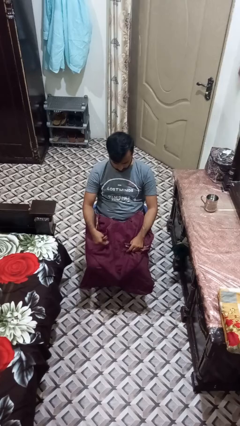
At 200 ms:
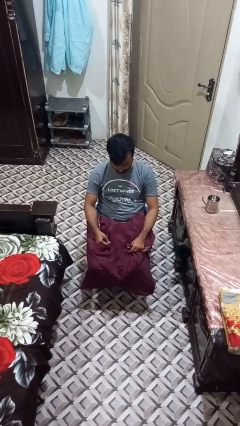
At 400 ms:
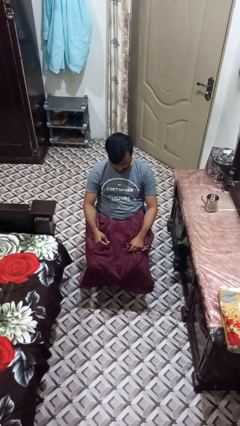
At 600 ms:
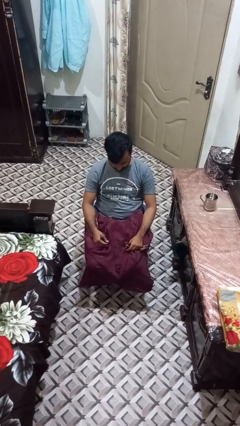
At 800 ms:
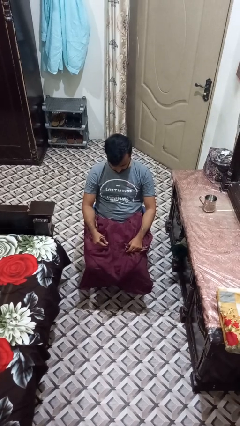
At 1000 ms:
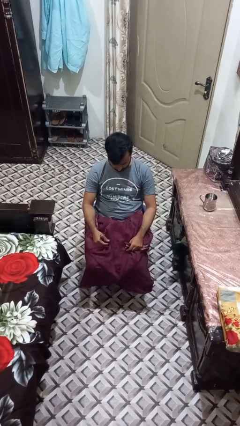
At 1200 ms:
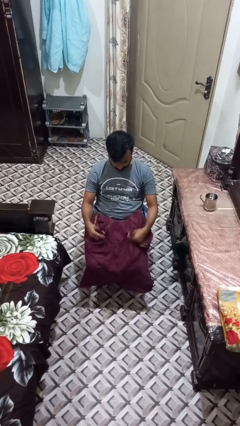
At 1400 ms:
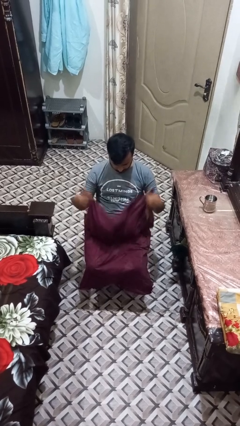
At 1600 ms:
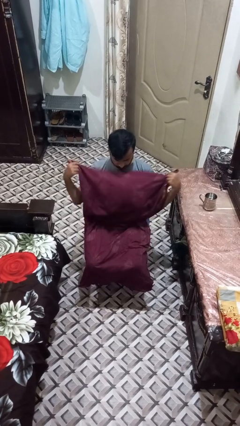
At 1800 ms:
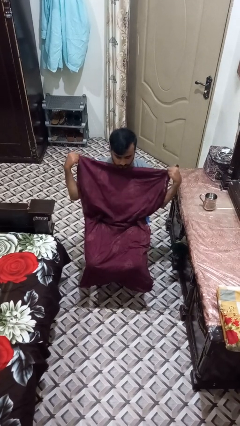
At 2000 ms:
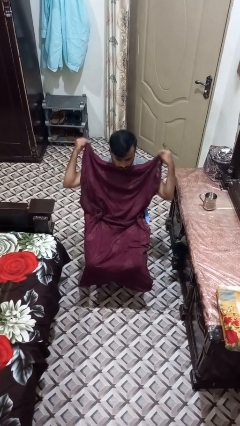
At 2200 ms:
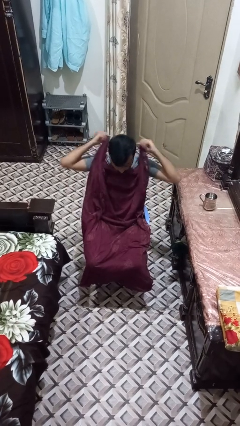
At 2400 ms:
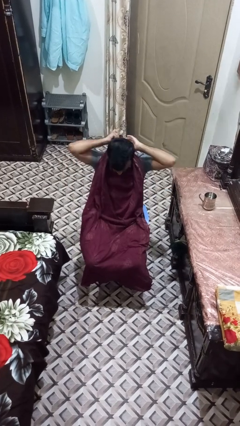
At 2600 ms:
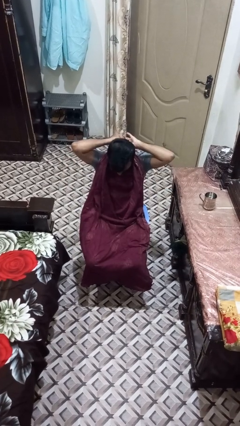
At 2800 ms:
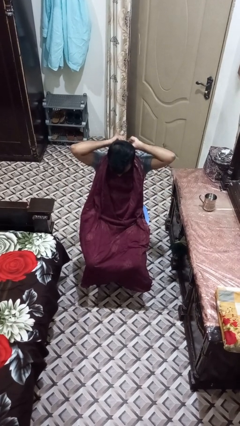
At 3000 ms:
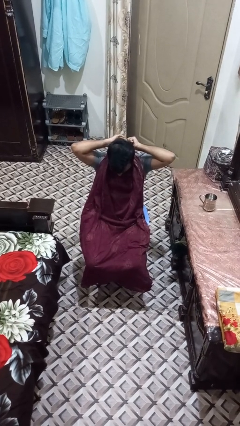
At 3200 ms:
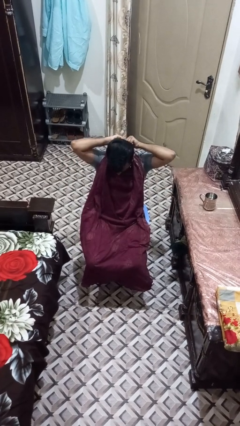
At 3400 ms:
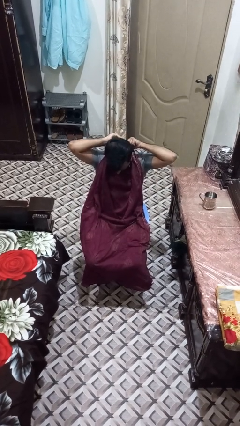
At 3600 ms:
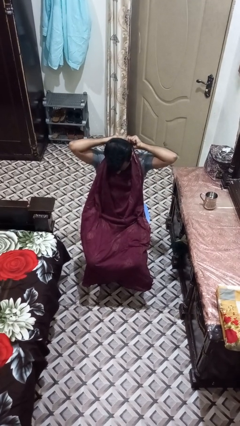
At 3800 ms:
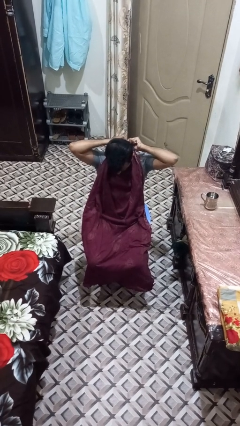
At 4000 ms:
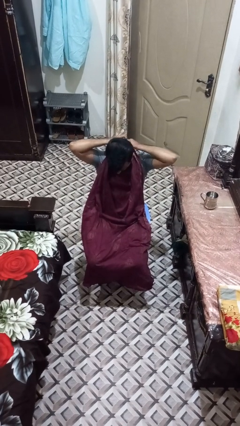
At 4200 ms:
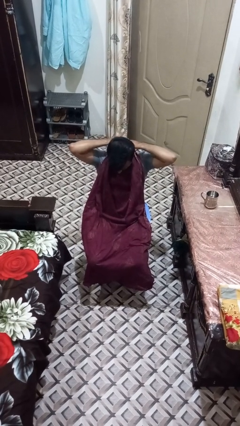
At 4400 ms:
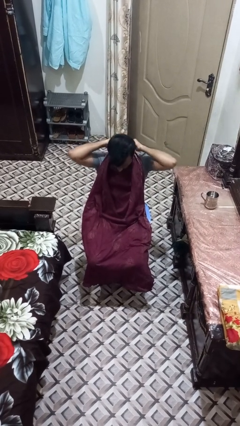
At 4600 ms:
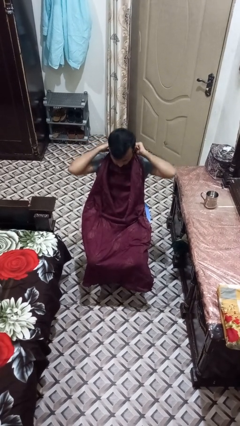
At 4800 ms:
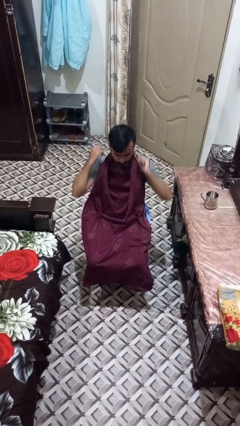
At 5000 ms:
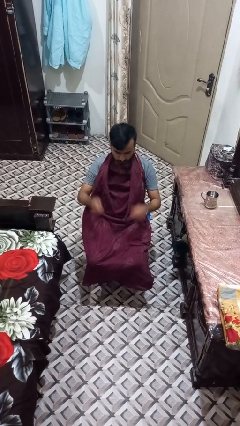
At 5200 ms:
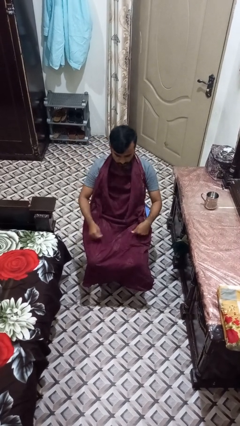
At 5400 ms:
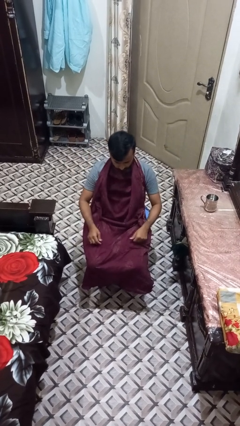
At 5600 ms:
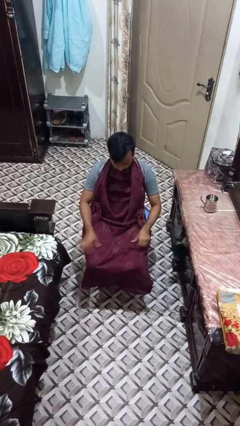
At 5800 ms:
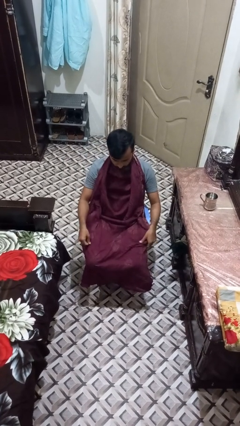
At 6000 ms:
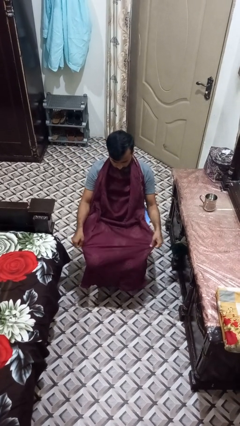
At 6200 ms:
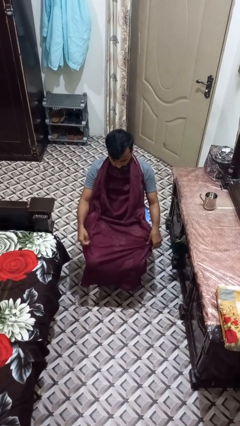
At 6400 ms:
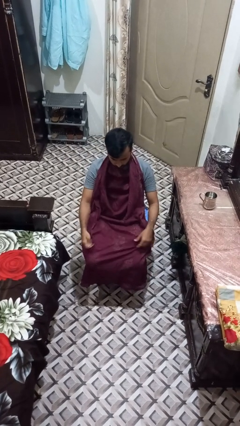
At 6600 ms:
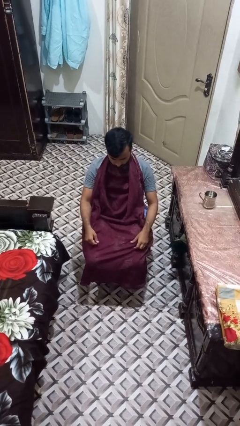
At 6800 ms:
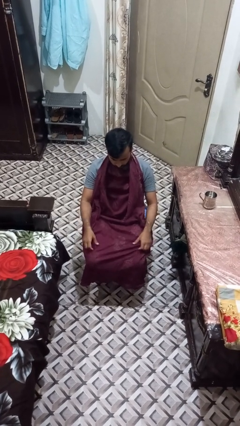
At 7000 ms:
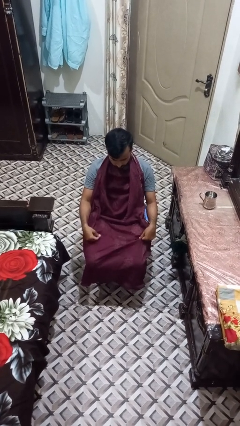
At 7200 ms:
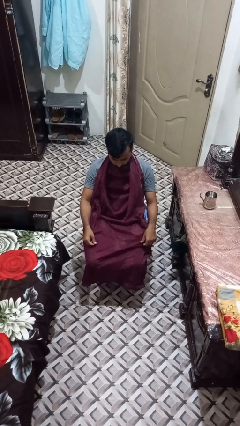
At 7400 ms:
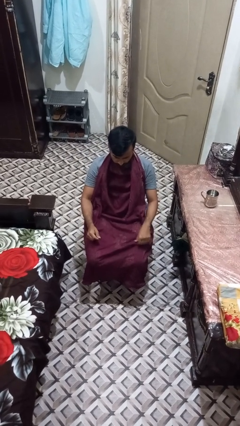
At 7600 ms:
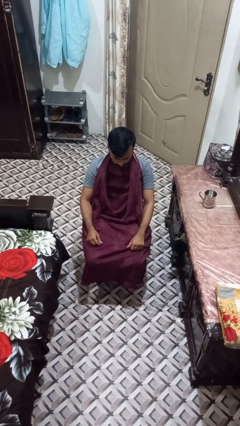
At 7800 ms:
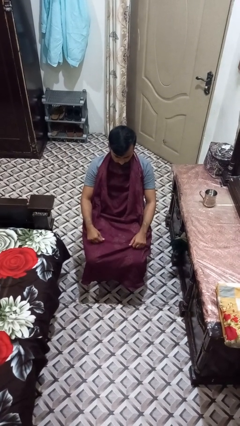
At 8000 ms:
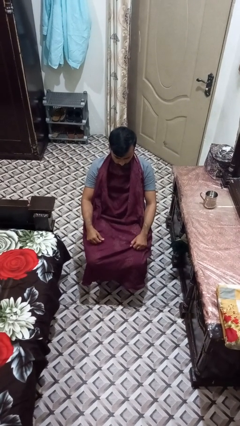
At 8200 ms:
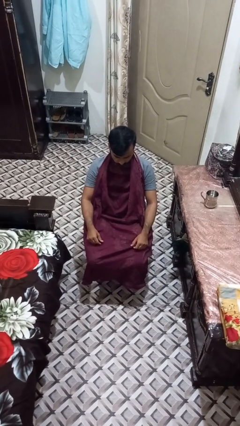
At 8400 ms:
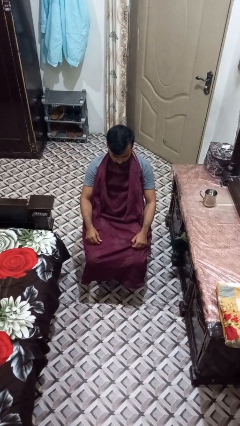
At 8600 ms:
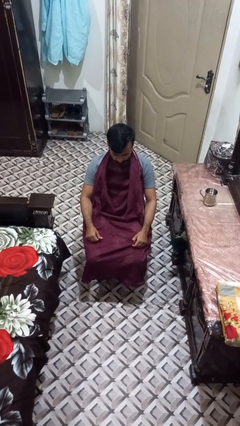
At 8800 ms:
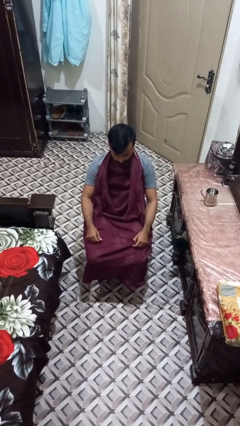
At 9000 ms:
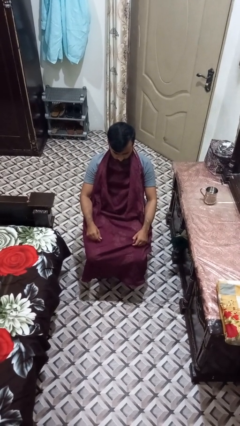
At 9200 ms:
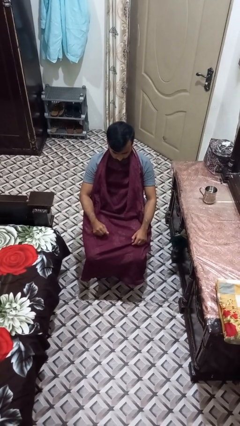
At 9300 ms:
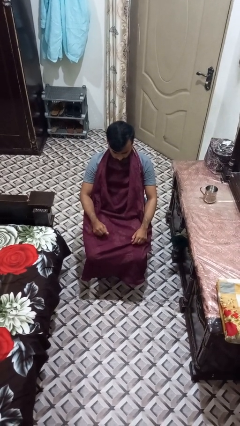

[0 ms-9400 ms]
person puts on apron

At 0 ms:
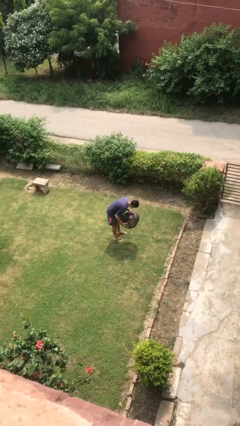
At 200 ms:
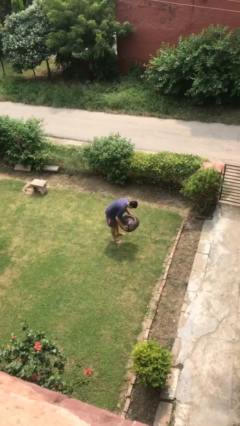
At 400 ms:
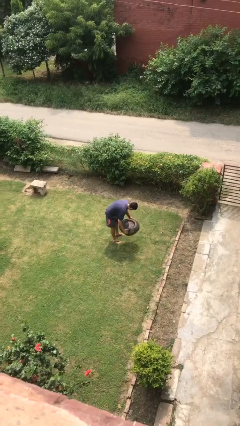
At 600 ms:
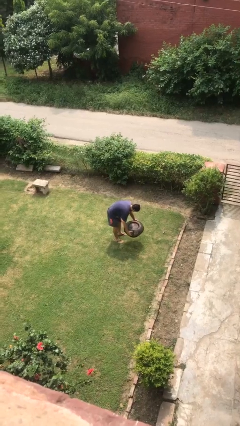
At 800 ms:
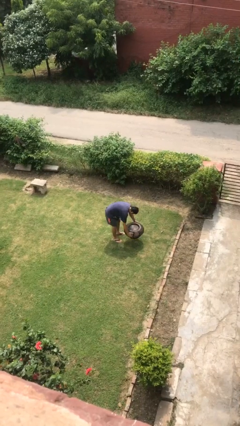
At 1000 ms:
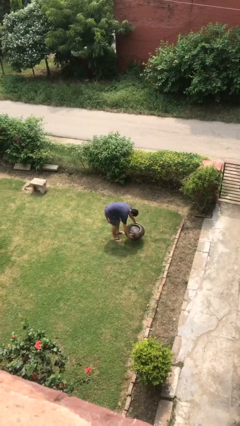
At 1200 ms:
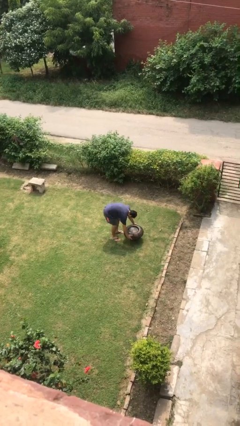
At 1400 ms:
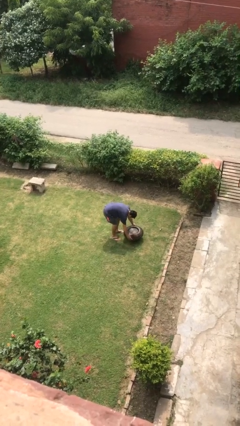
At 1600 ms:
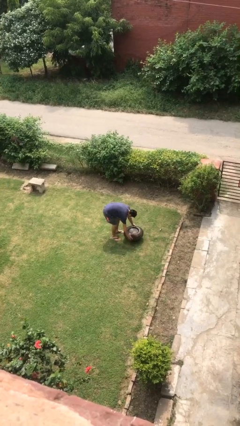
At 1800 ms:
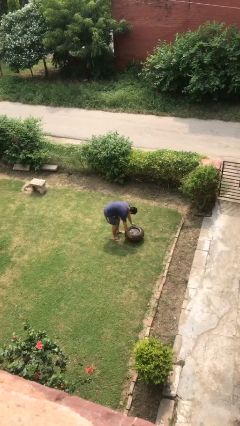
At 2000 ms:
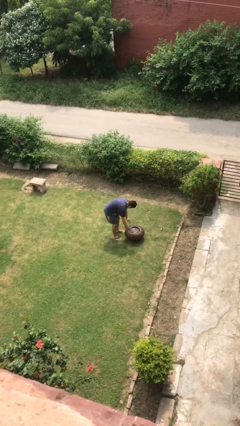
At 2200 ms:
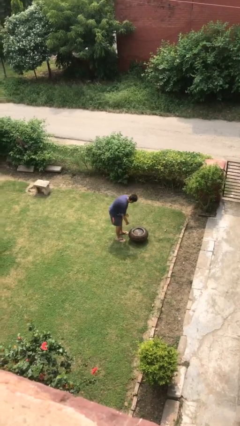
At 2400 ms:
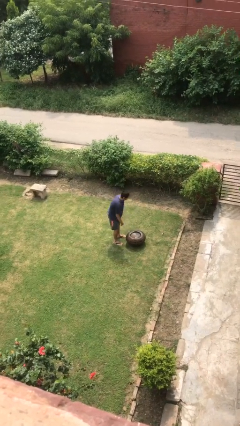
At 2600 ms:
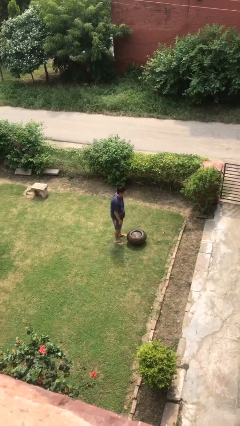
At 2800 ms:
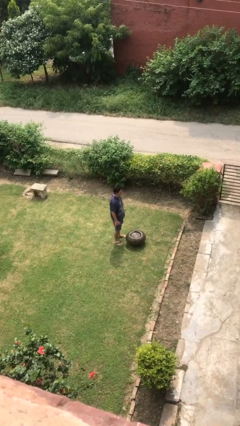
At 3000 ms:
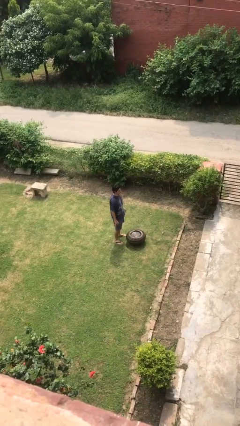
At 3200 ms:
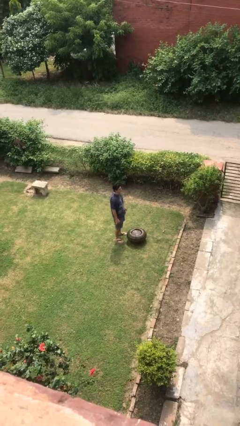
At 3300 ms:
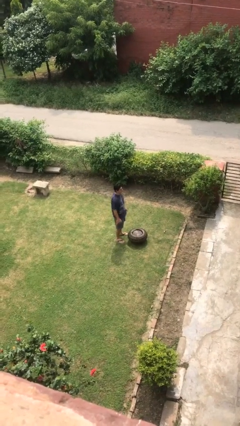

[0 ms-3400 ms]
person puts down object on floor

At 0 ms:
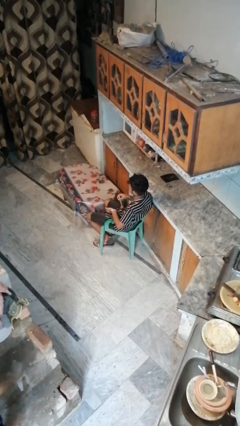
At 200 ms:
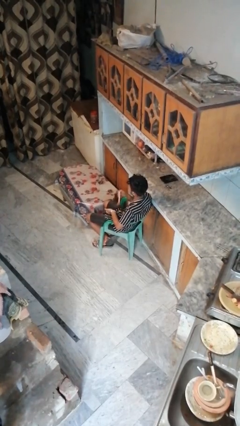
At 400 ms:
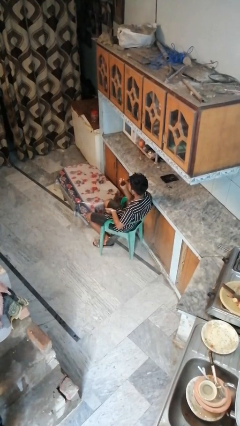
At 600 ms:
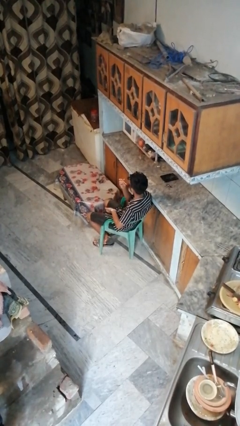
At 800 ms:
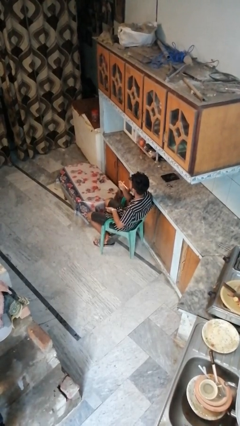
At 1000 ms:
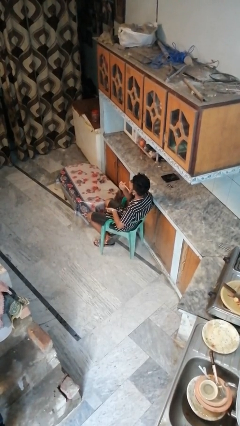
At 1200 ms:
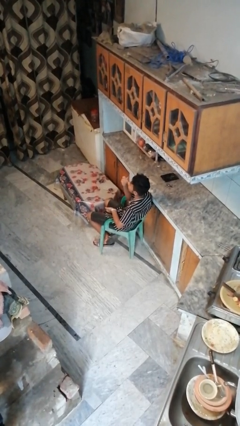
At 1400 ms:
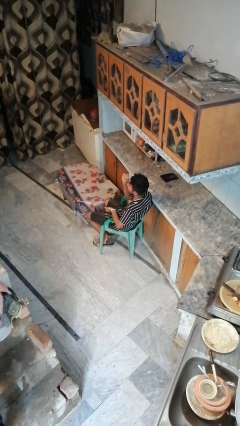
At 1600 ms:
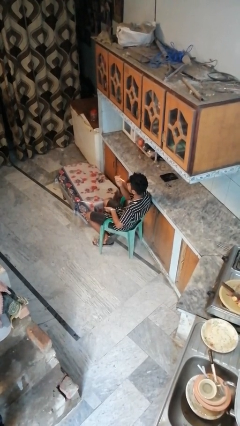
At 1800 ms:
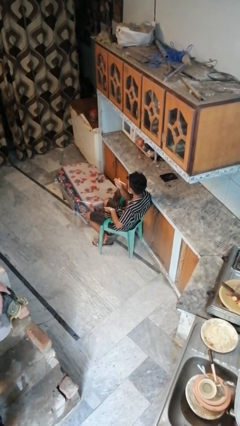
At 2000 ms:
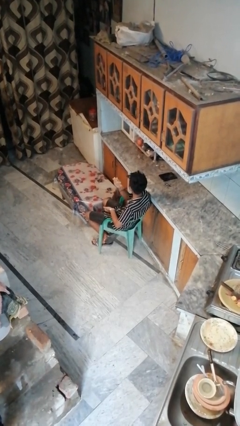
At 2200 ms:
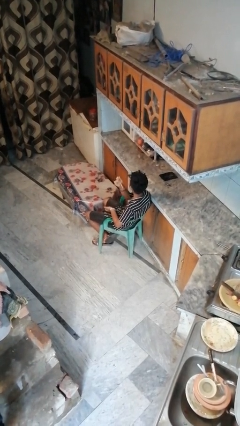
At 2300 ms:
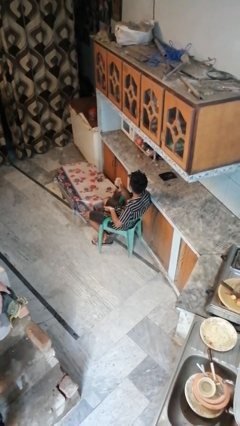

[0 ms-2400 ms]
person applies foundation makeup

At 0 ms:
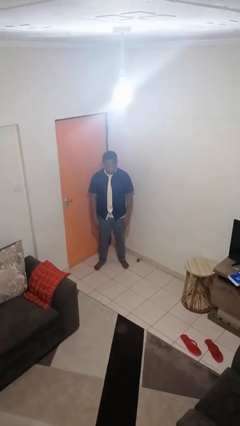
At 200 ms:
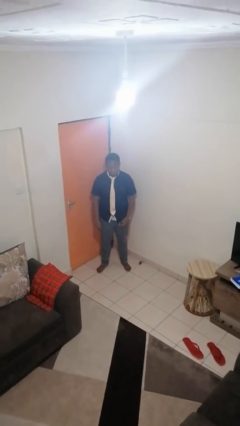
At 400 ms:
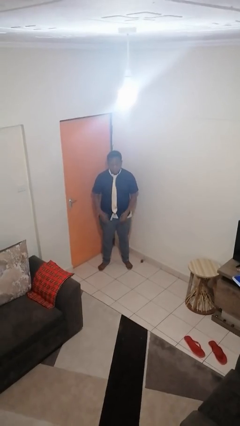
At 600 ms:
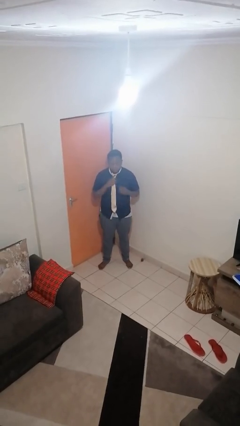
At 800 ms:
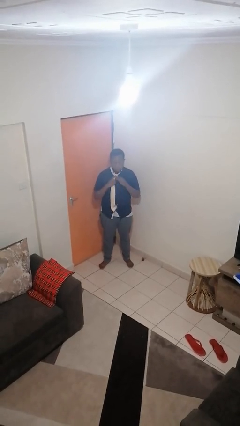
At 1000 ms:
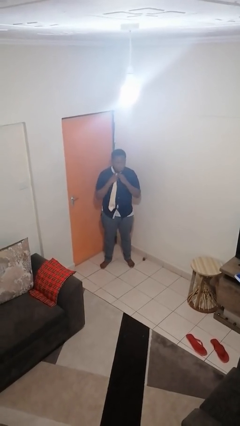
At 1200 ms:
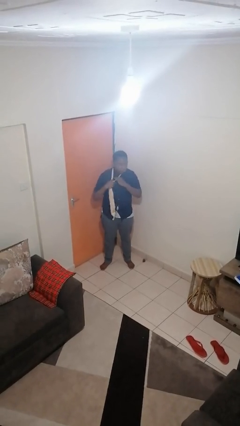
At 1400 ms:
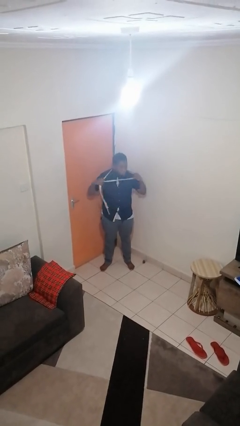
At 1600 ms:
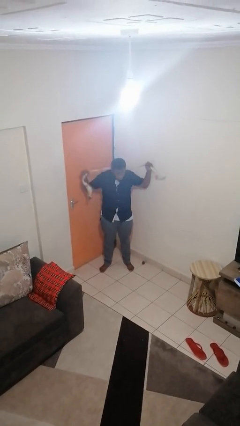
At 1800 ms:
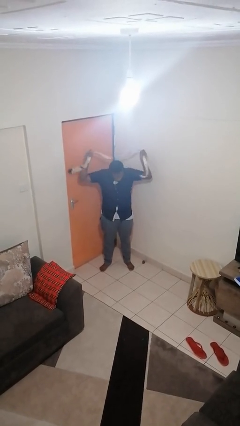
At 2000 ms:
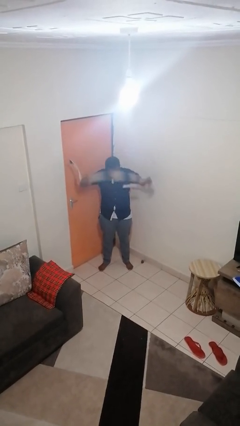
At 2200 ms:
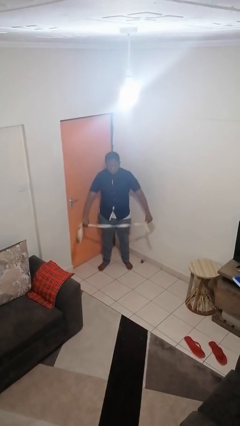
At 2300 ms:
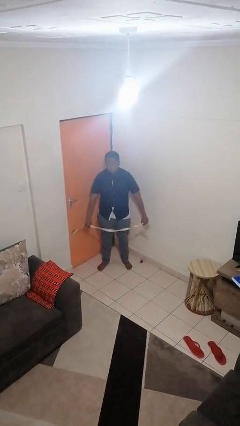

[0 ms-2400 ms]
person takes off necktie
